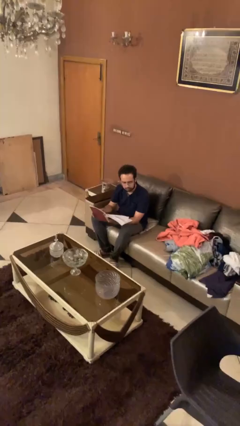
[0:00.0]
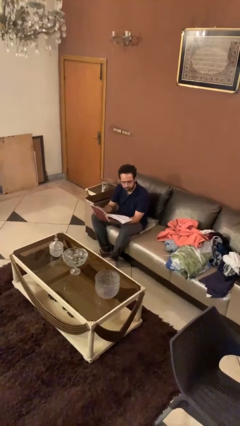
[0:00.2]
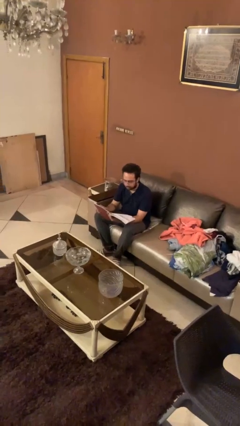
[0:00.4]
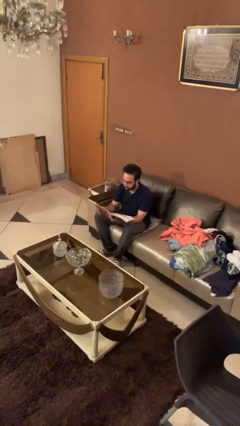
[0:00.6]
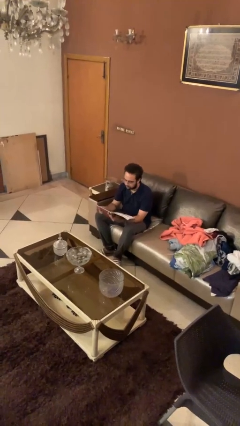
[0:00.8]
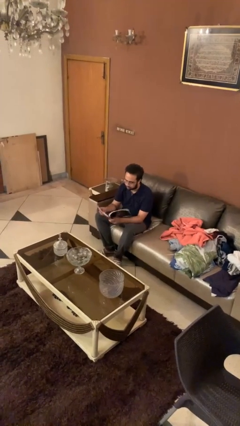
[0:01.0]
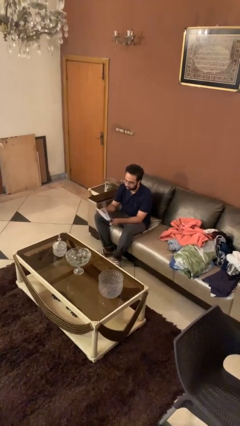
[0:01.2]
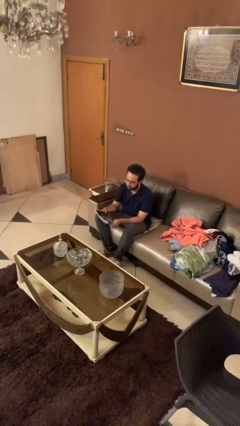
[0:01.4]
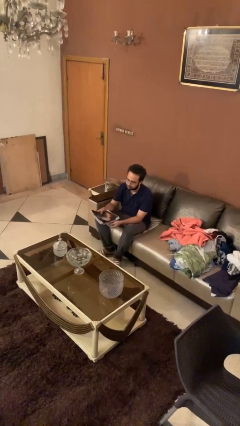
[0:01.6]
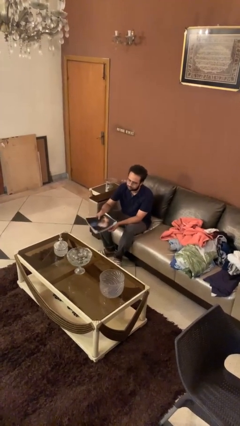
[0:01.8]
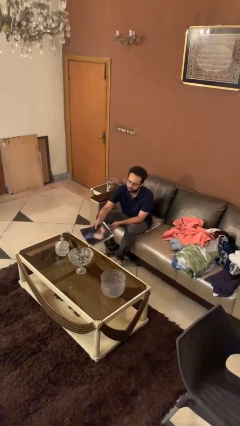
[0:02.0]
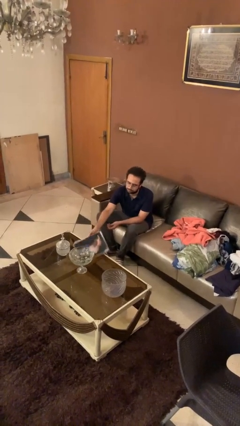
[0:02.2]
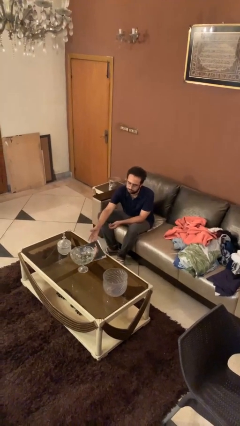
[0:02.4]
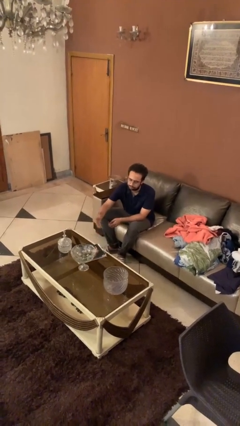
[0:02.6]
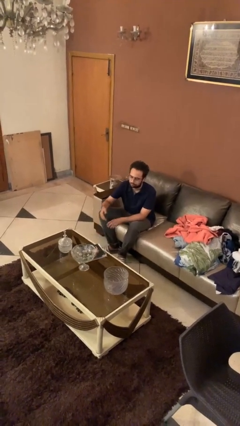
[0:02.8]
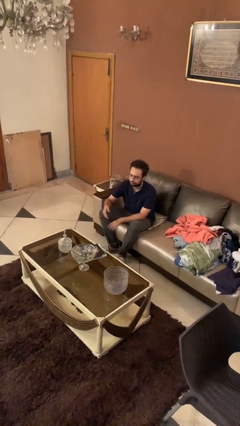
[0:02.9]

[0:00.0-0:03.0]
person puts down object on table

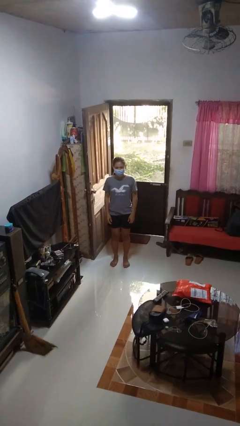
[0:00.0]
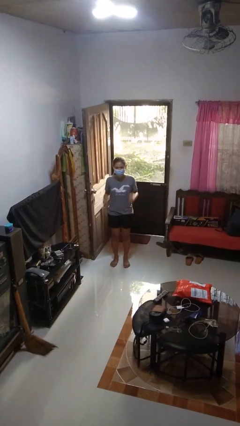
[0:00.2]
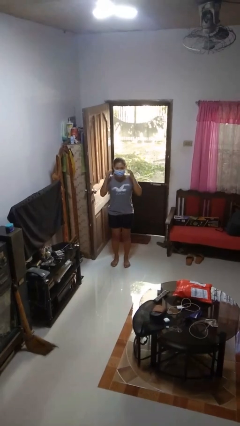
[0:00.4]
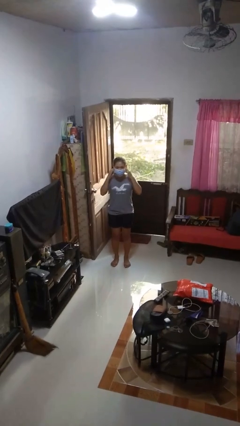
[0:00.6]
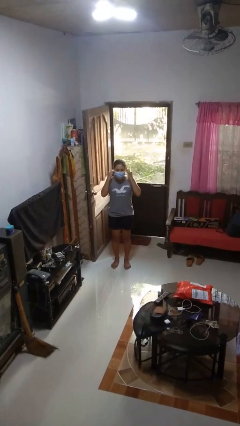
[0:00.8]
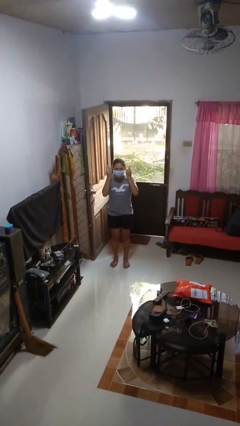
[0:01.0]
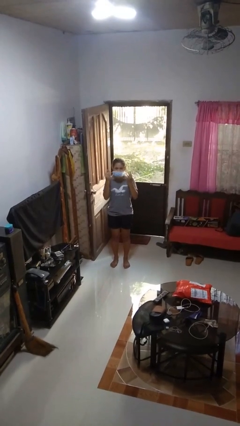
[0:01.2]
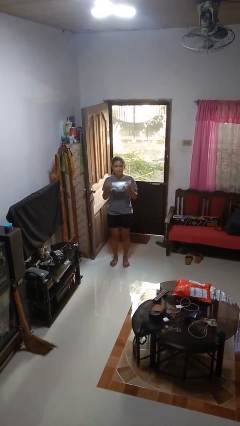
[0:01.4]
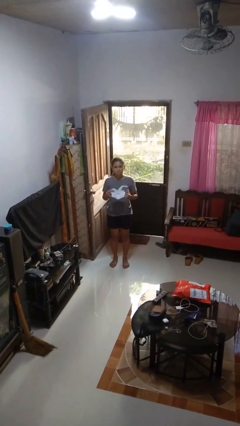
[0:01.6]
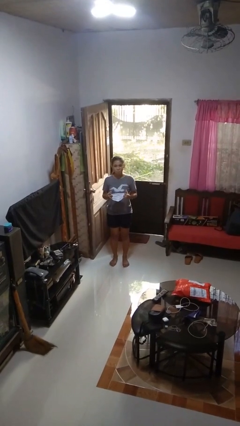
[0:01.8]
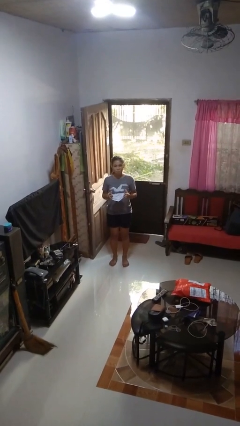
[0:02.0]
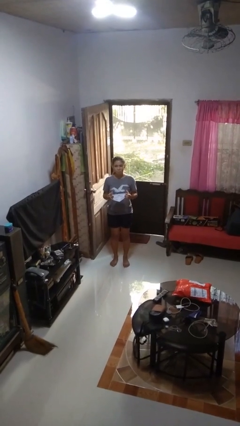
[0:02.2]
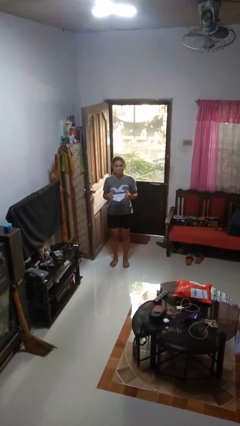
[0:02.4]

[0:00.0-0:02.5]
person takes off facemask

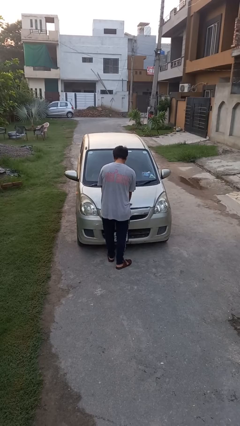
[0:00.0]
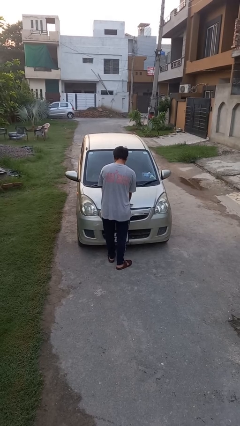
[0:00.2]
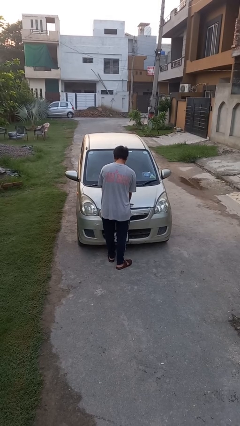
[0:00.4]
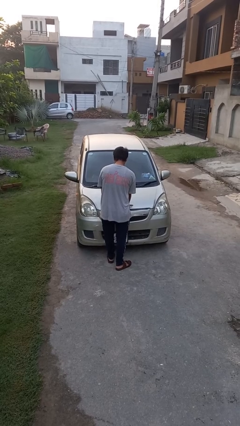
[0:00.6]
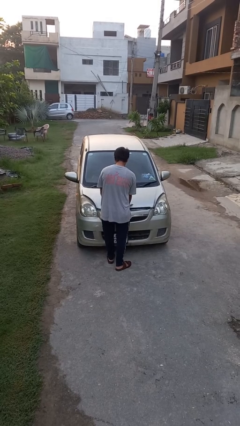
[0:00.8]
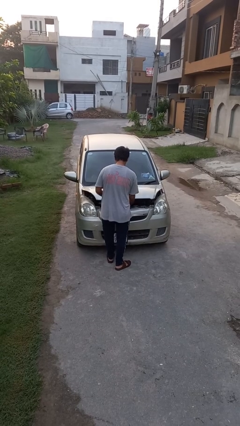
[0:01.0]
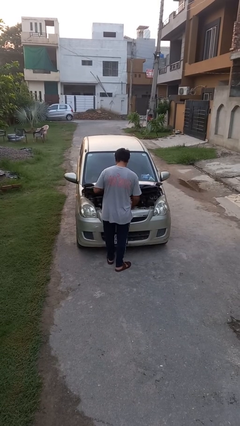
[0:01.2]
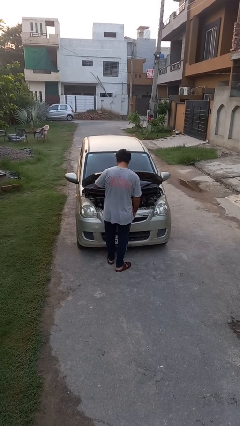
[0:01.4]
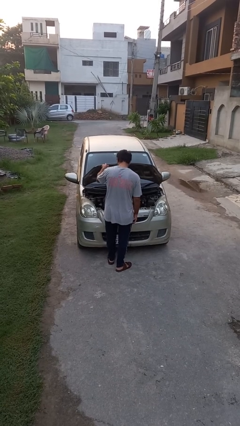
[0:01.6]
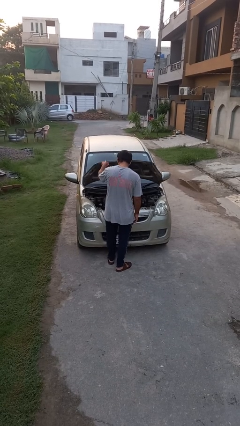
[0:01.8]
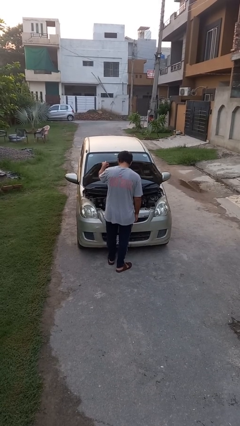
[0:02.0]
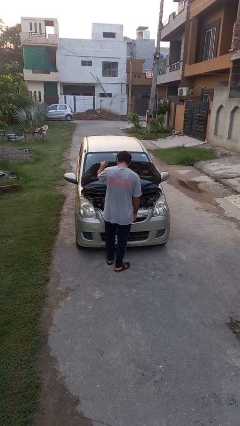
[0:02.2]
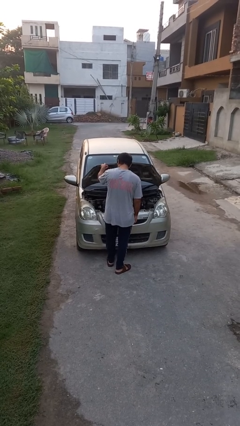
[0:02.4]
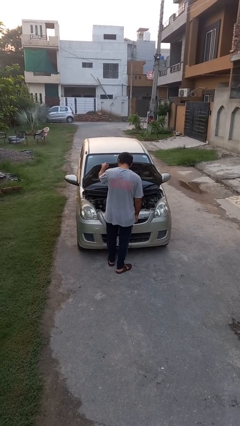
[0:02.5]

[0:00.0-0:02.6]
person opens car hood

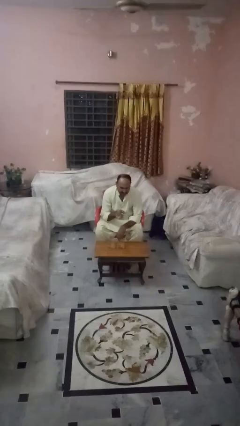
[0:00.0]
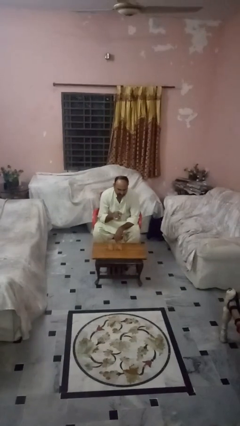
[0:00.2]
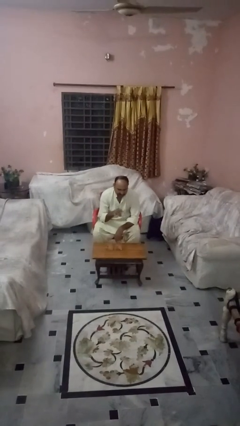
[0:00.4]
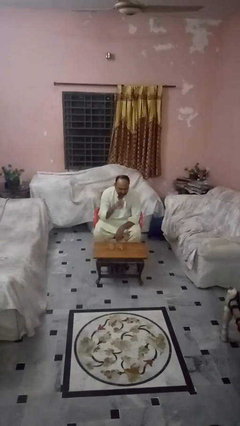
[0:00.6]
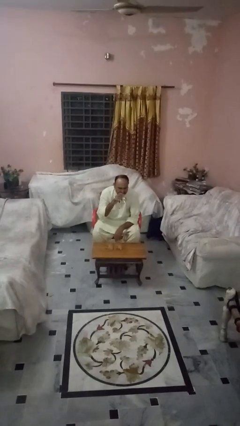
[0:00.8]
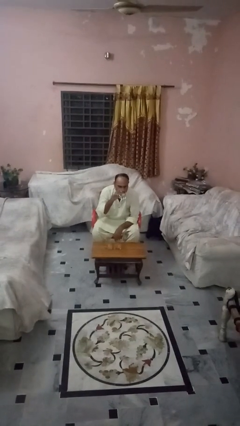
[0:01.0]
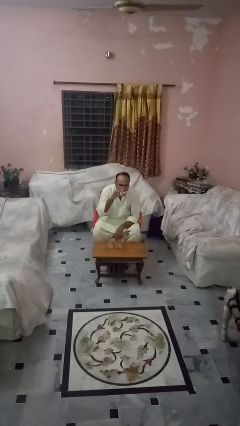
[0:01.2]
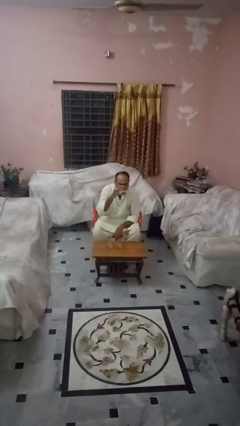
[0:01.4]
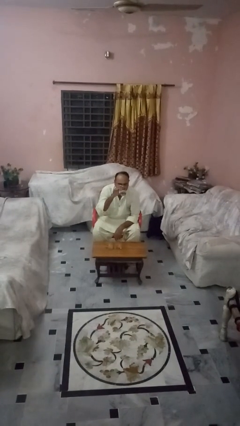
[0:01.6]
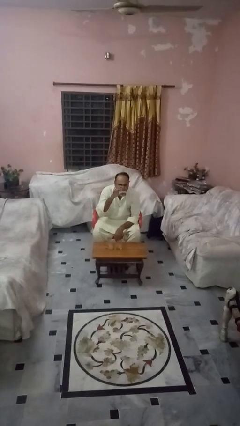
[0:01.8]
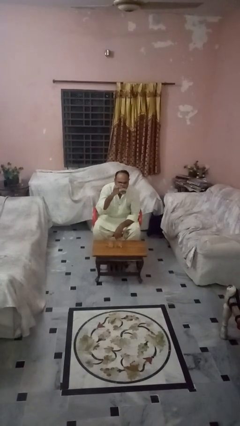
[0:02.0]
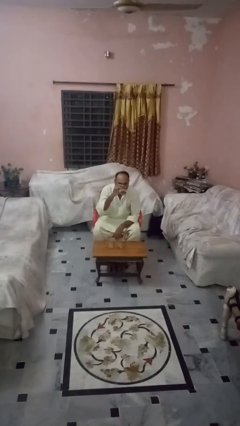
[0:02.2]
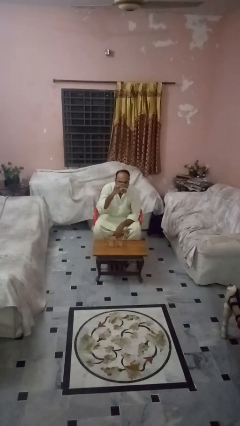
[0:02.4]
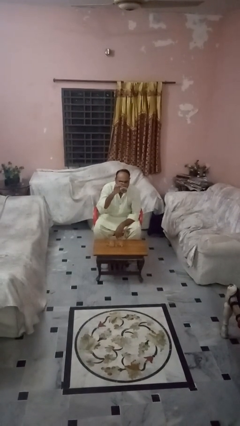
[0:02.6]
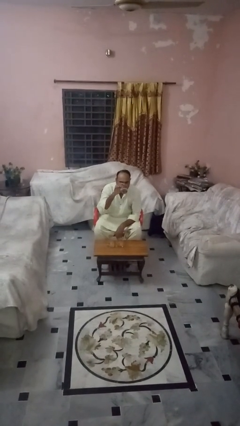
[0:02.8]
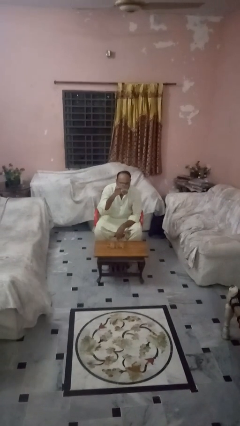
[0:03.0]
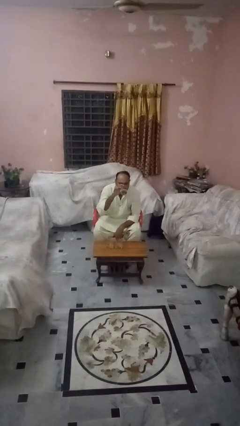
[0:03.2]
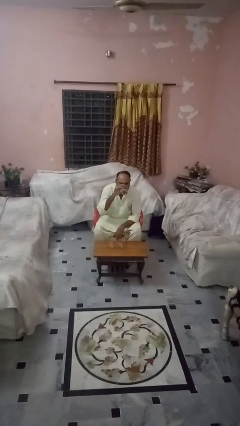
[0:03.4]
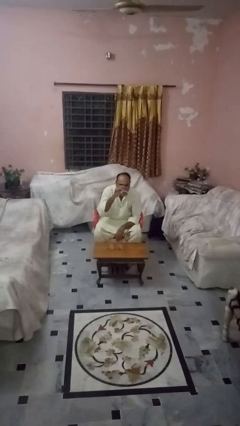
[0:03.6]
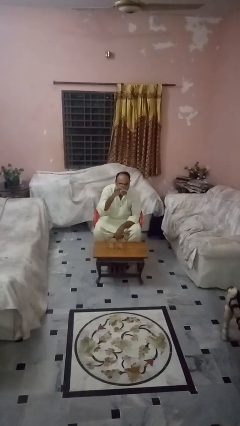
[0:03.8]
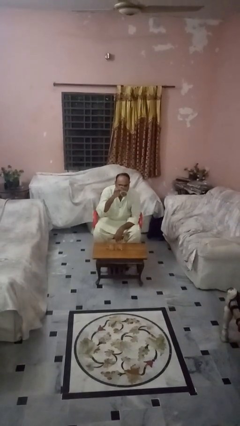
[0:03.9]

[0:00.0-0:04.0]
person drinks from shotglass

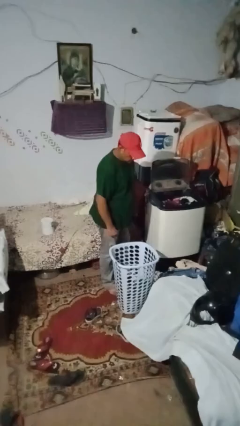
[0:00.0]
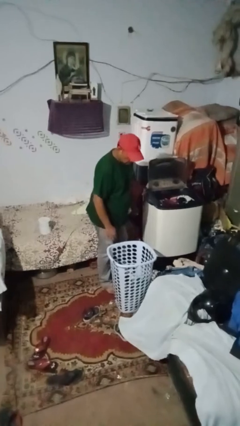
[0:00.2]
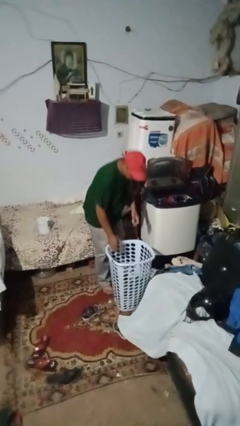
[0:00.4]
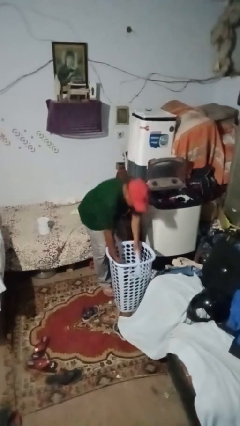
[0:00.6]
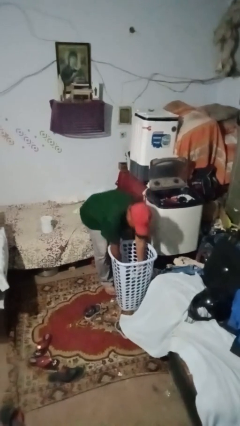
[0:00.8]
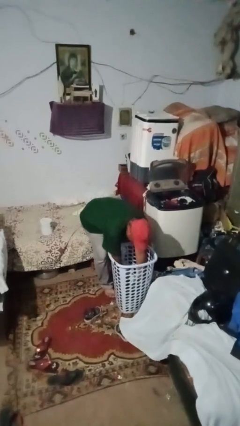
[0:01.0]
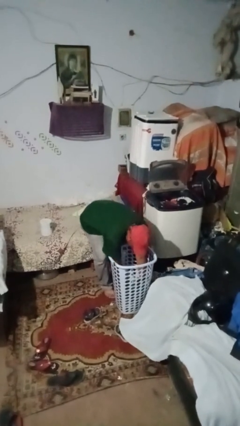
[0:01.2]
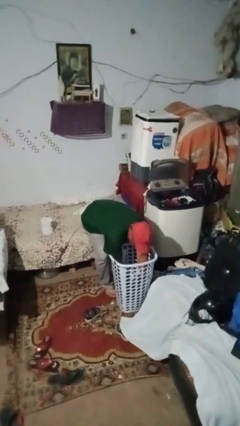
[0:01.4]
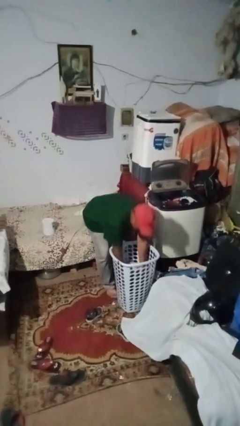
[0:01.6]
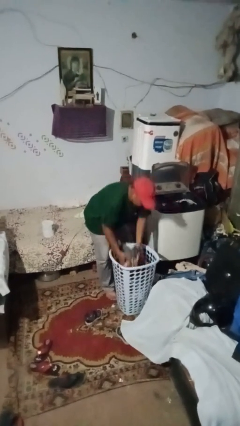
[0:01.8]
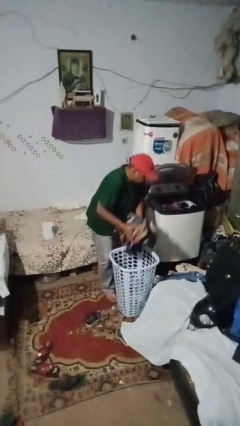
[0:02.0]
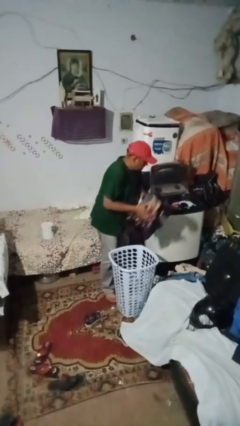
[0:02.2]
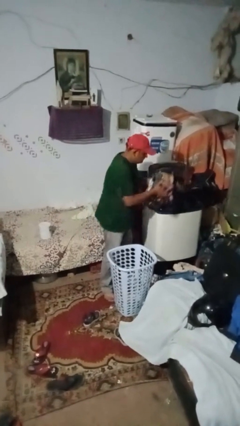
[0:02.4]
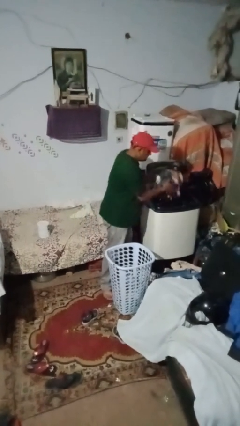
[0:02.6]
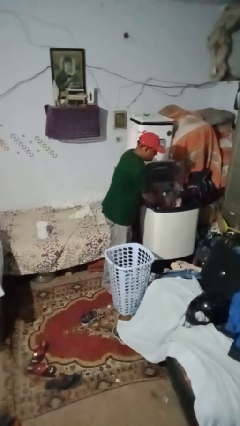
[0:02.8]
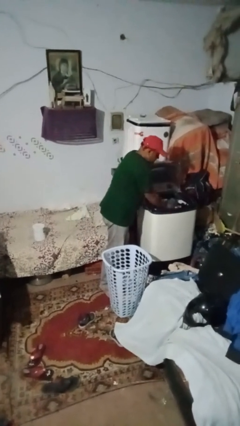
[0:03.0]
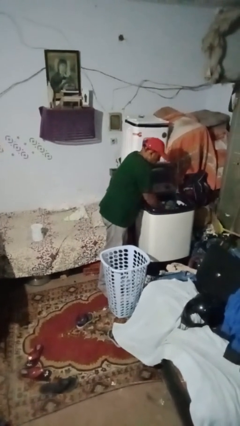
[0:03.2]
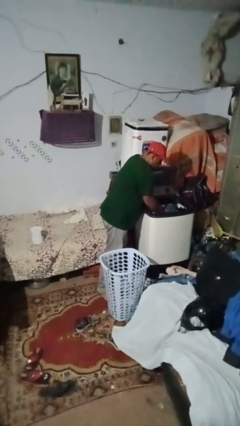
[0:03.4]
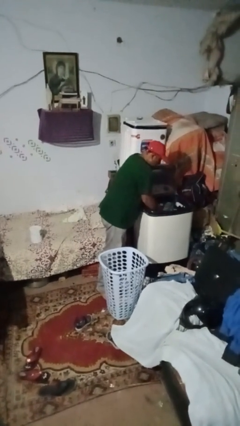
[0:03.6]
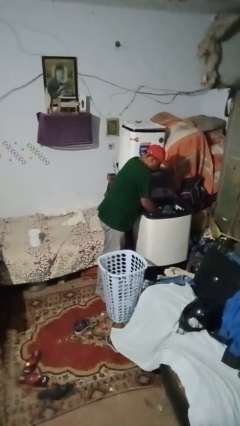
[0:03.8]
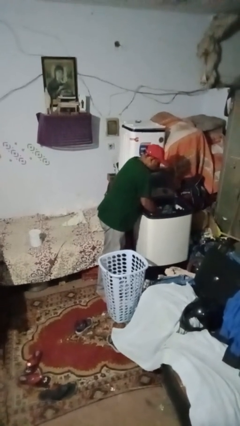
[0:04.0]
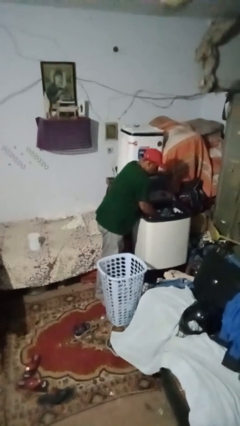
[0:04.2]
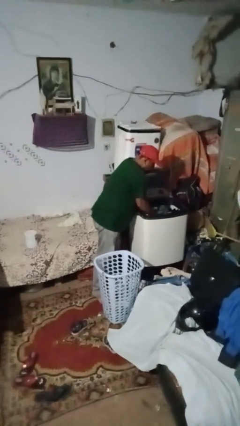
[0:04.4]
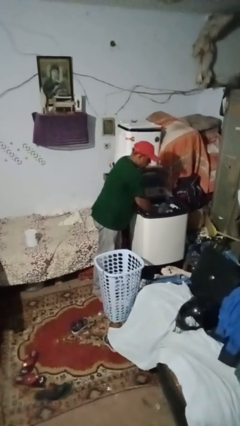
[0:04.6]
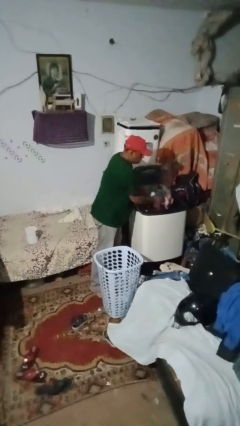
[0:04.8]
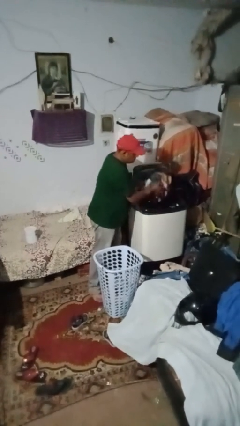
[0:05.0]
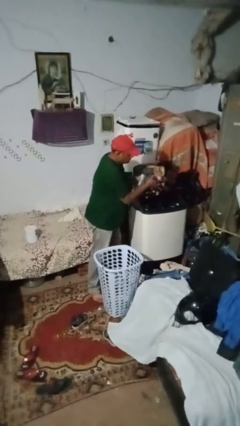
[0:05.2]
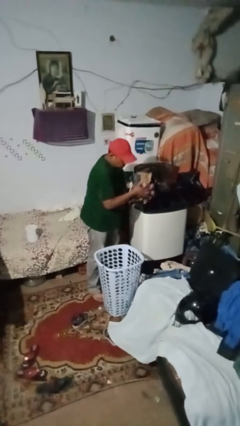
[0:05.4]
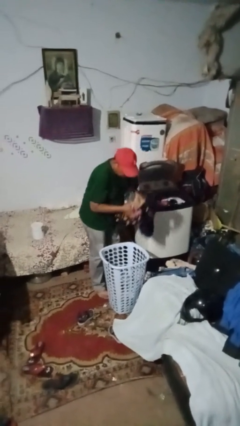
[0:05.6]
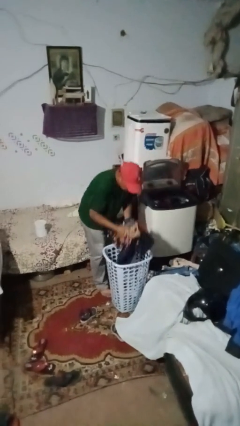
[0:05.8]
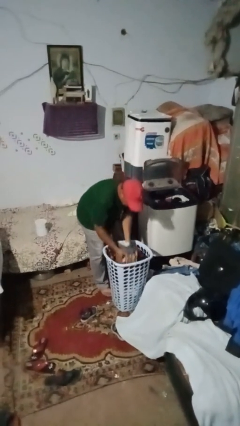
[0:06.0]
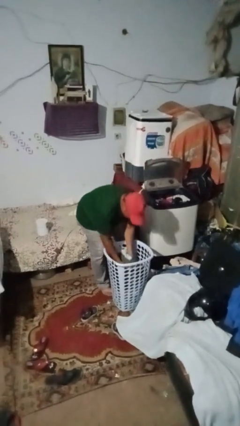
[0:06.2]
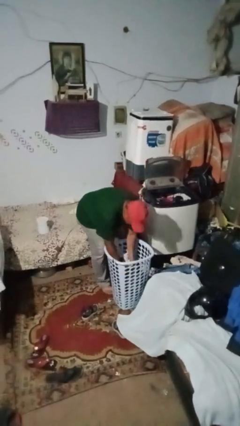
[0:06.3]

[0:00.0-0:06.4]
person loads dryer
